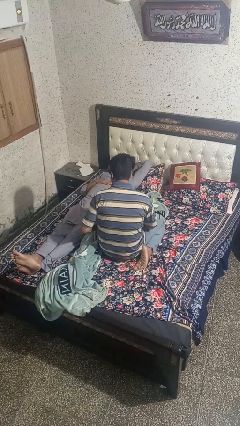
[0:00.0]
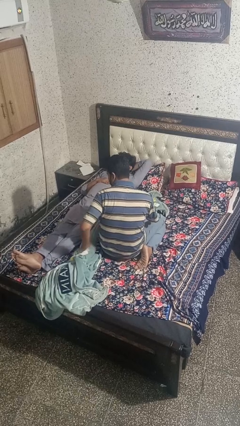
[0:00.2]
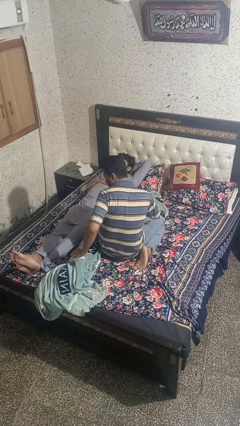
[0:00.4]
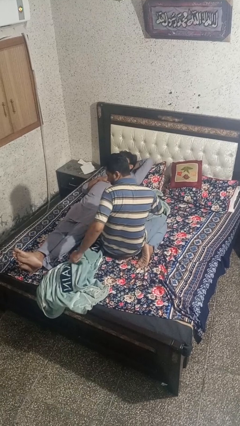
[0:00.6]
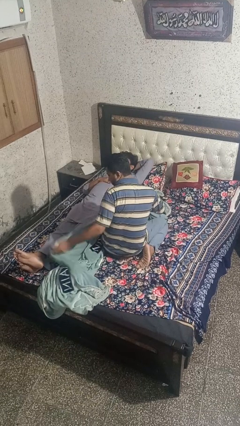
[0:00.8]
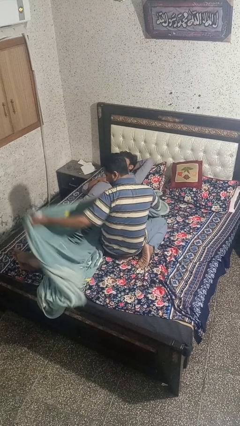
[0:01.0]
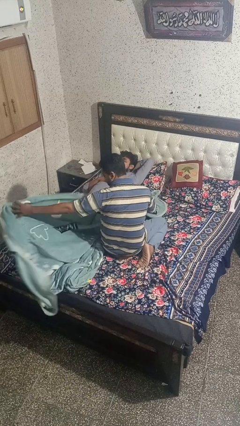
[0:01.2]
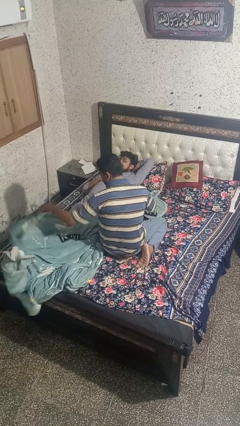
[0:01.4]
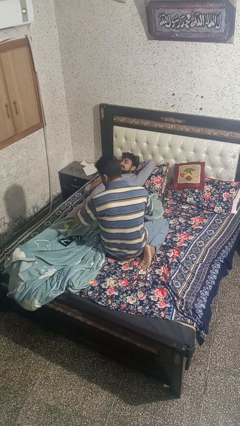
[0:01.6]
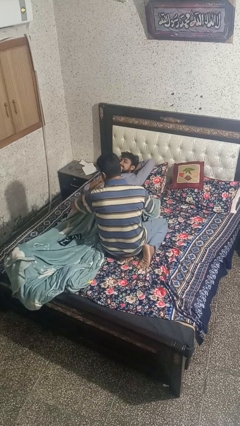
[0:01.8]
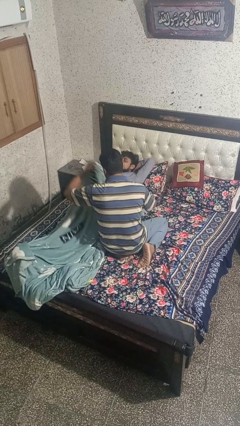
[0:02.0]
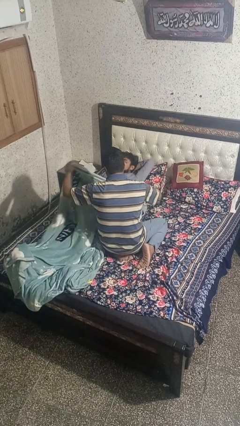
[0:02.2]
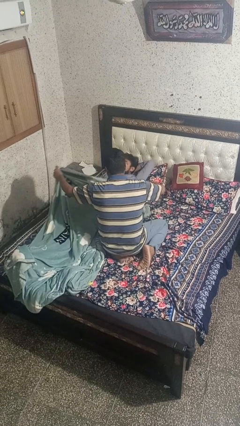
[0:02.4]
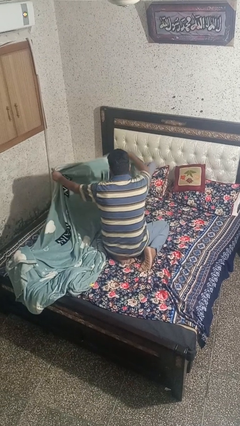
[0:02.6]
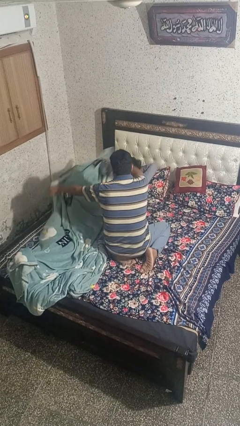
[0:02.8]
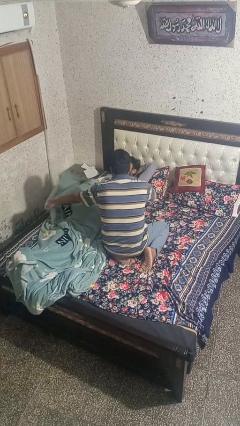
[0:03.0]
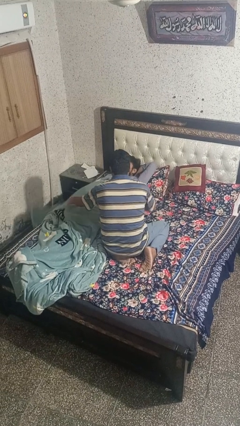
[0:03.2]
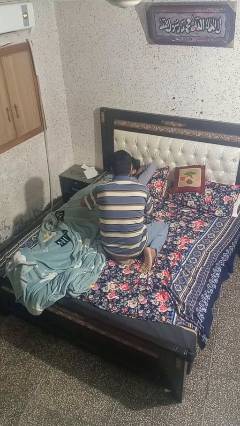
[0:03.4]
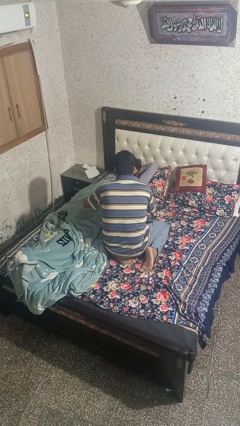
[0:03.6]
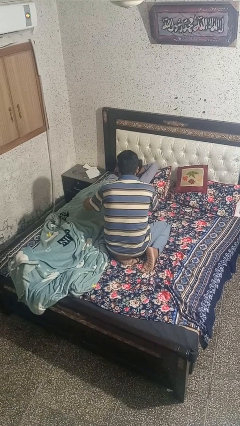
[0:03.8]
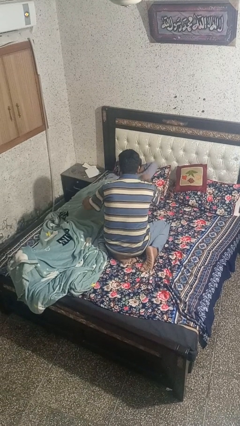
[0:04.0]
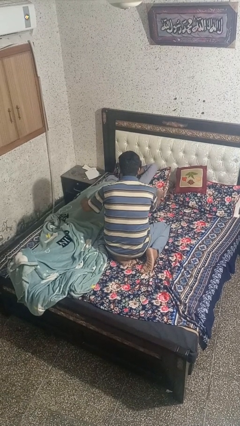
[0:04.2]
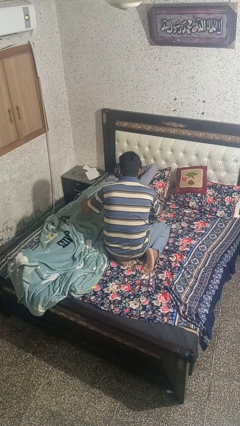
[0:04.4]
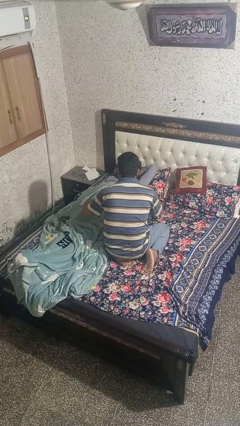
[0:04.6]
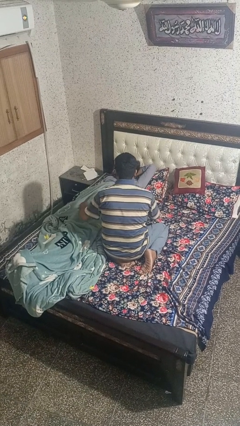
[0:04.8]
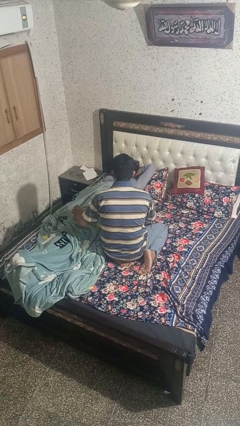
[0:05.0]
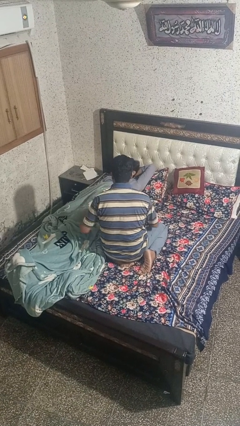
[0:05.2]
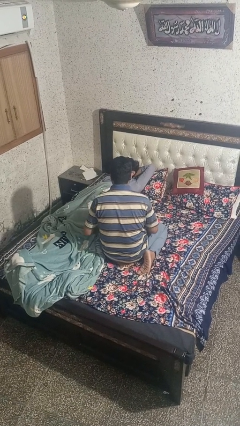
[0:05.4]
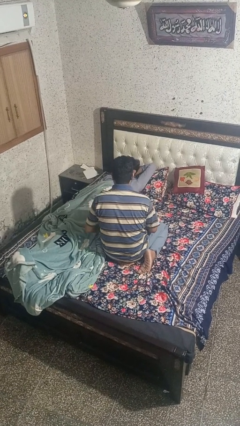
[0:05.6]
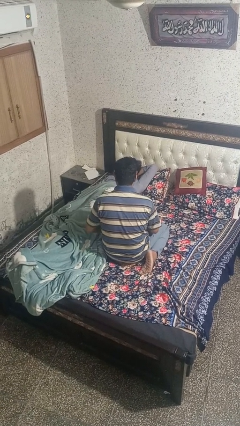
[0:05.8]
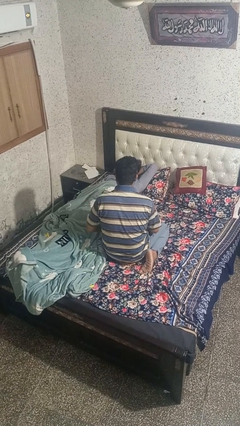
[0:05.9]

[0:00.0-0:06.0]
person covers friend with blanket

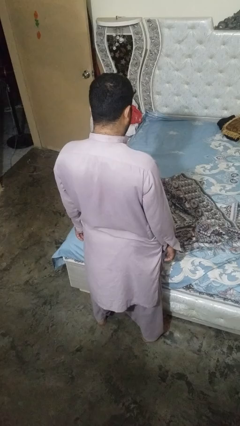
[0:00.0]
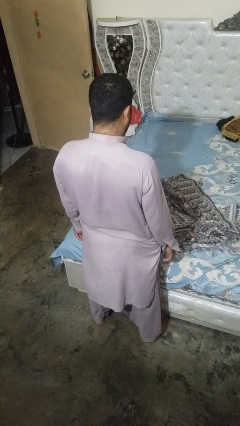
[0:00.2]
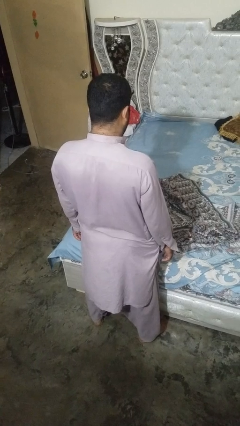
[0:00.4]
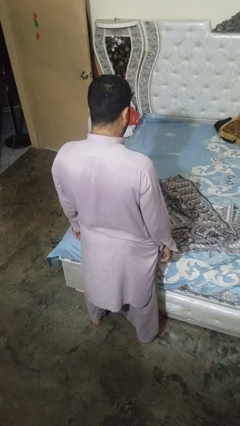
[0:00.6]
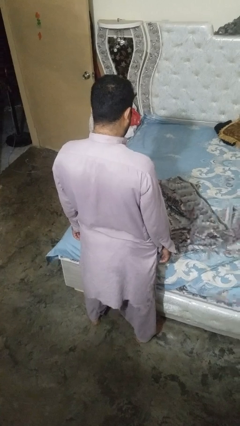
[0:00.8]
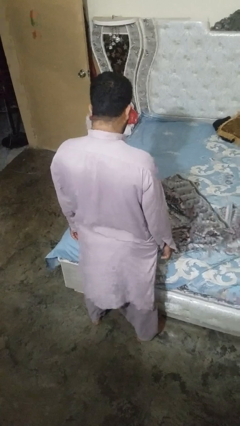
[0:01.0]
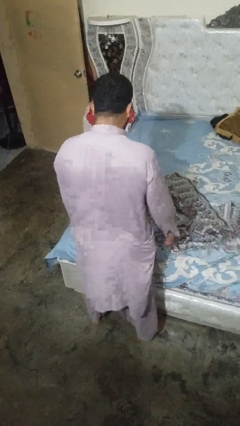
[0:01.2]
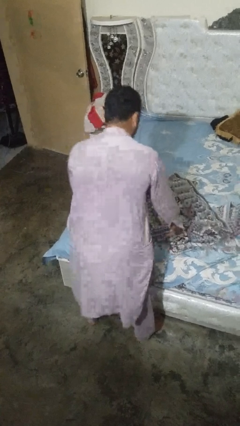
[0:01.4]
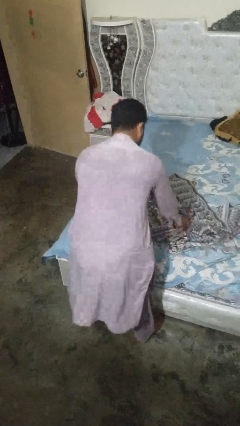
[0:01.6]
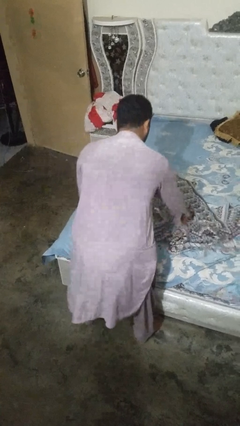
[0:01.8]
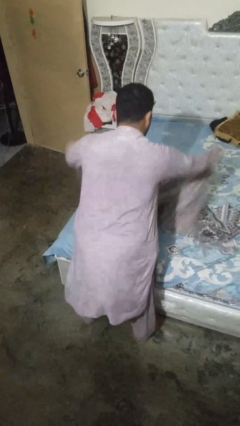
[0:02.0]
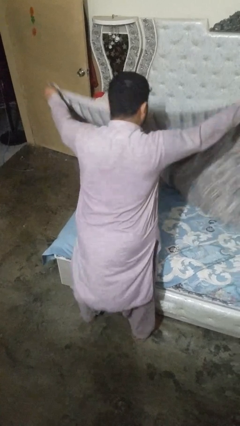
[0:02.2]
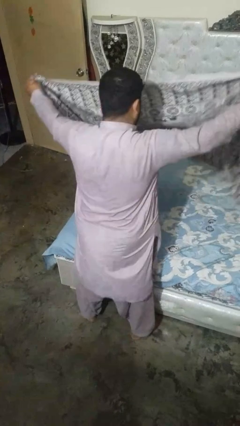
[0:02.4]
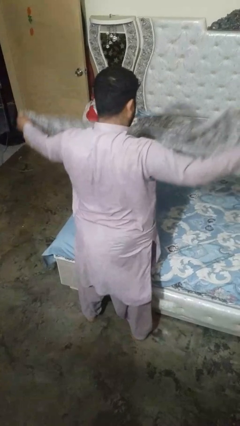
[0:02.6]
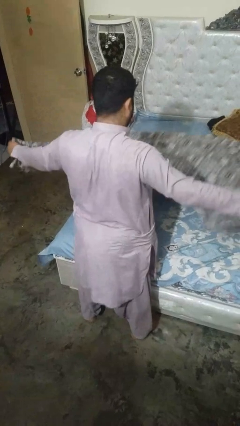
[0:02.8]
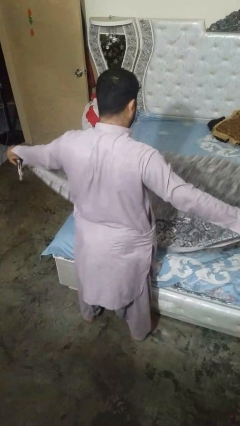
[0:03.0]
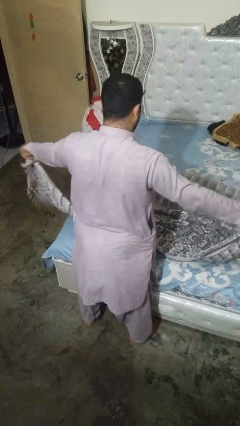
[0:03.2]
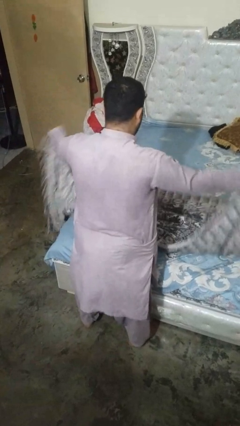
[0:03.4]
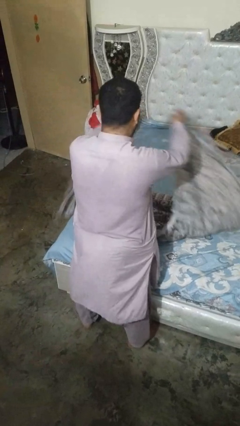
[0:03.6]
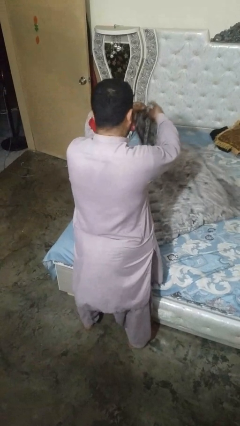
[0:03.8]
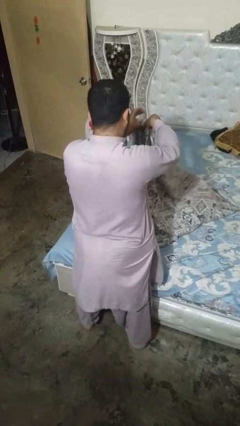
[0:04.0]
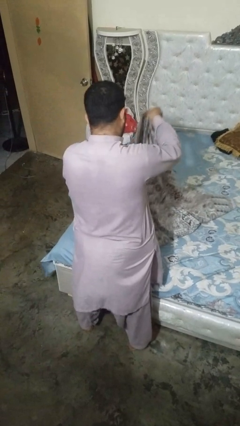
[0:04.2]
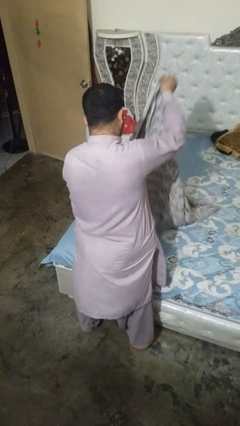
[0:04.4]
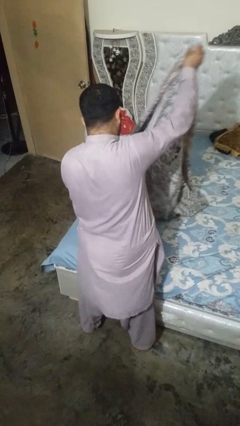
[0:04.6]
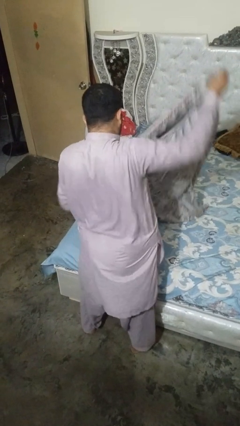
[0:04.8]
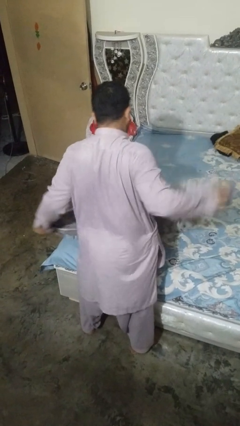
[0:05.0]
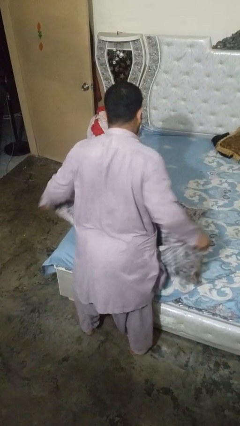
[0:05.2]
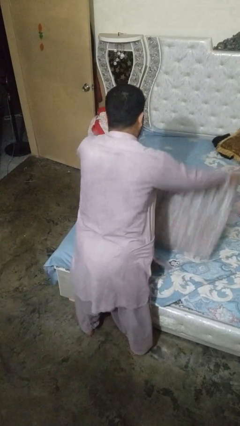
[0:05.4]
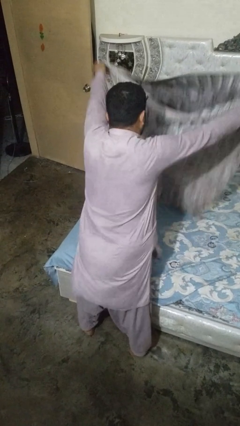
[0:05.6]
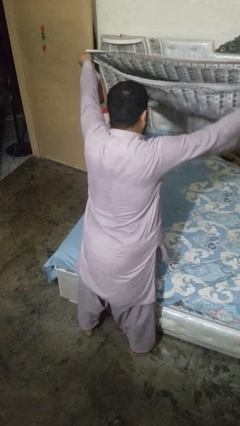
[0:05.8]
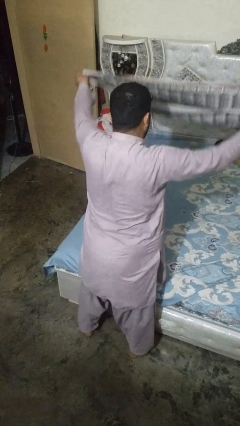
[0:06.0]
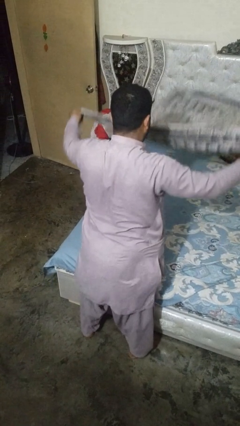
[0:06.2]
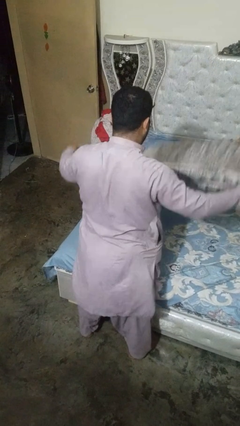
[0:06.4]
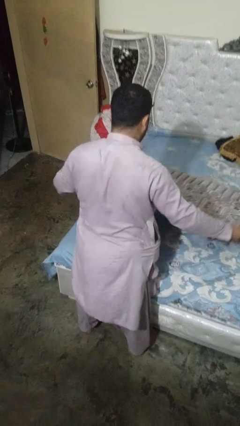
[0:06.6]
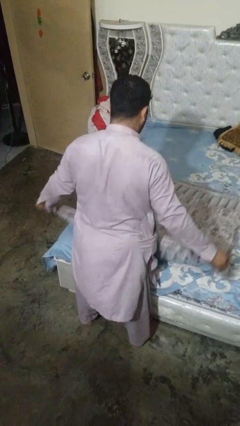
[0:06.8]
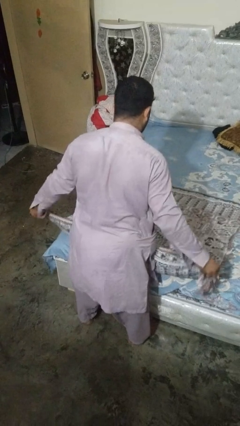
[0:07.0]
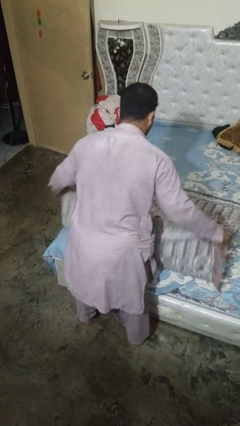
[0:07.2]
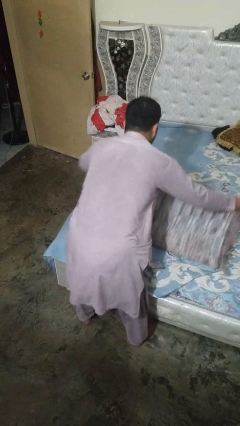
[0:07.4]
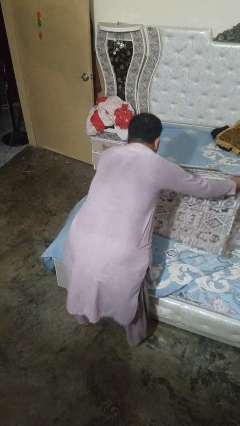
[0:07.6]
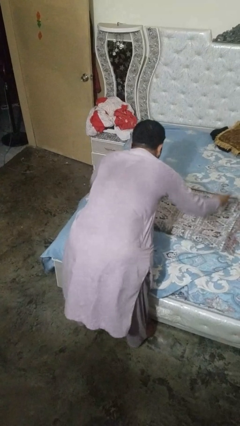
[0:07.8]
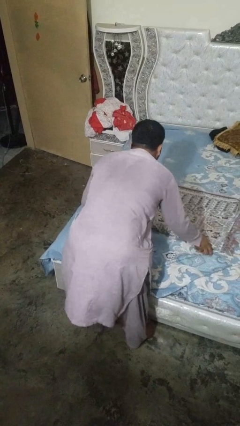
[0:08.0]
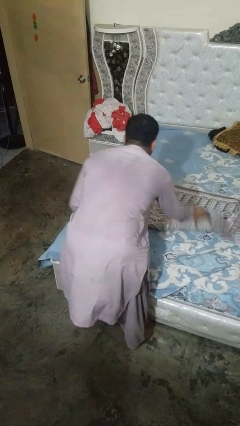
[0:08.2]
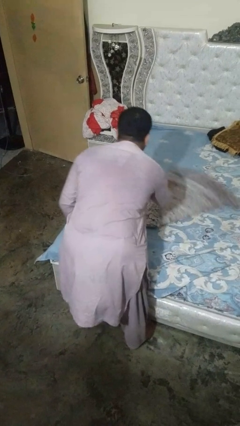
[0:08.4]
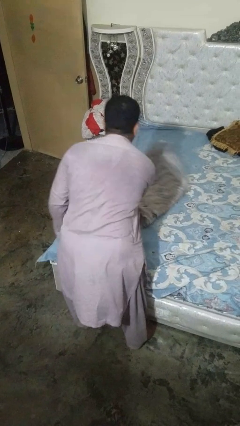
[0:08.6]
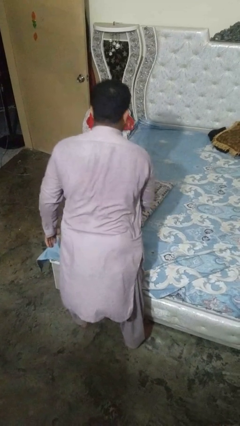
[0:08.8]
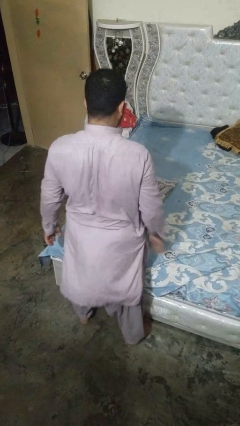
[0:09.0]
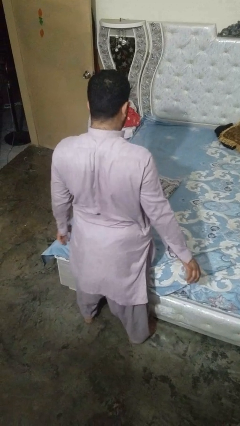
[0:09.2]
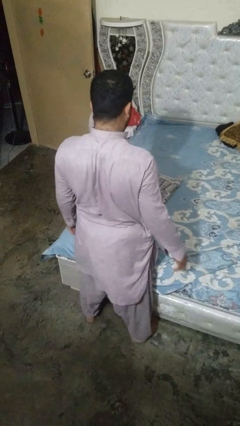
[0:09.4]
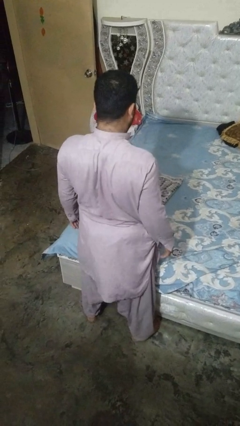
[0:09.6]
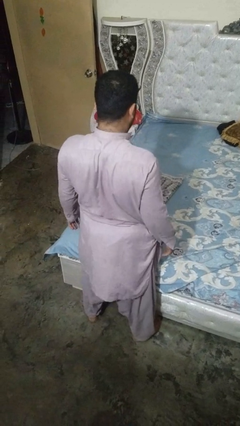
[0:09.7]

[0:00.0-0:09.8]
person folds blanket

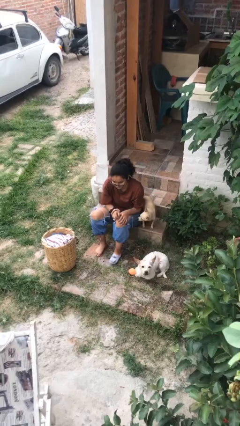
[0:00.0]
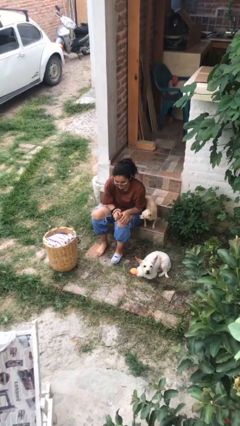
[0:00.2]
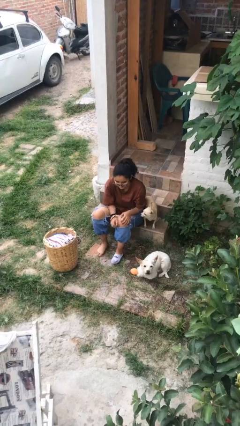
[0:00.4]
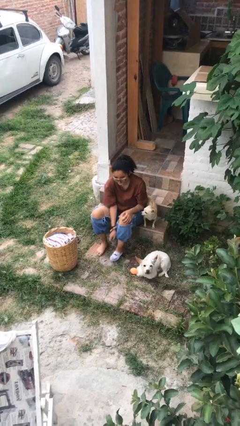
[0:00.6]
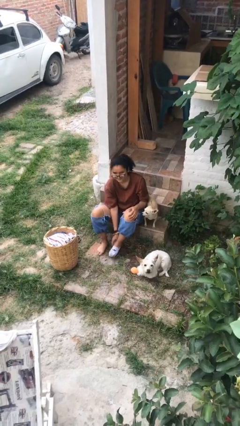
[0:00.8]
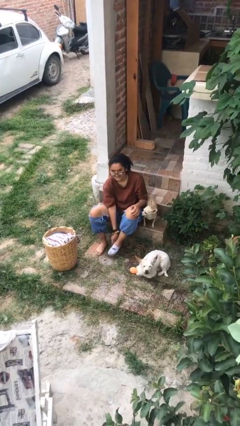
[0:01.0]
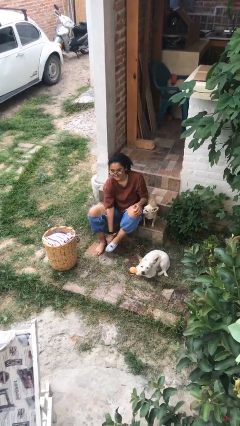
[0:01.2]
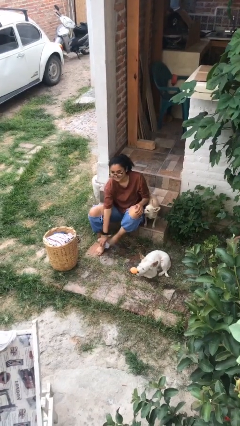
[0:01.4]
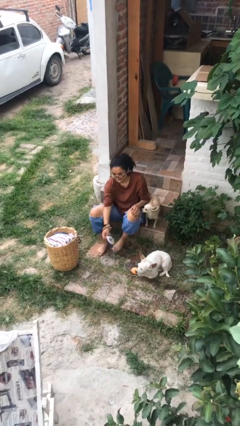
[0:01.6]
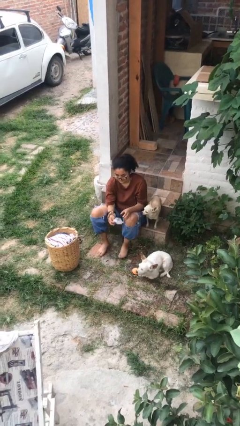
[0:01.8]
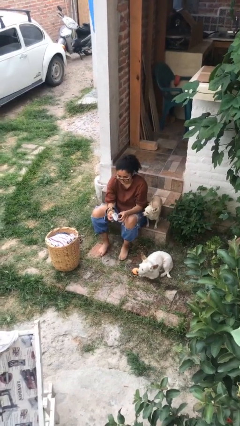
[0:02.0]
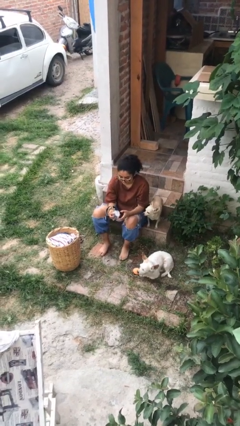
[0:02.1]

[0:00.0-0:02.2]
person takes off socks
